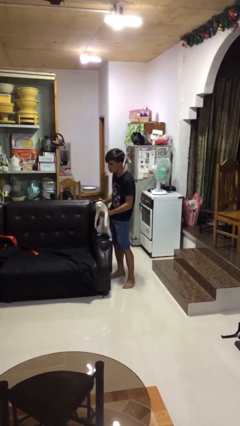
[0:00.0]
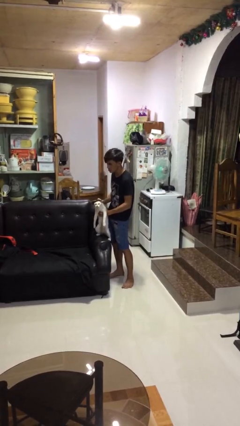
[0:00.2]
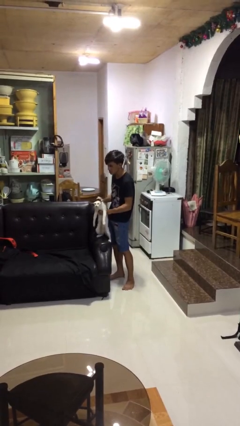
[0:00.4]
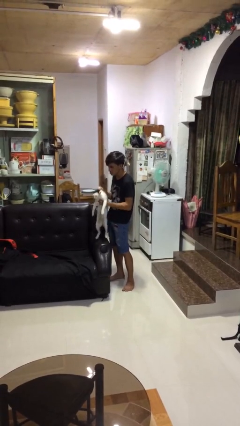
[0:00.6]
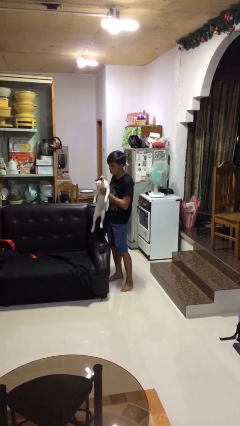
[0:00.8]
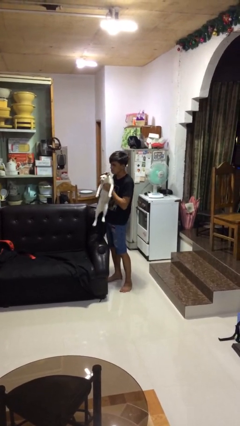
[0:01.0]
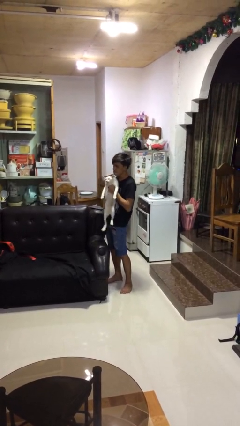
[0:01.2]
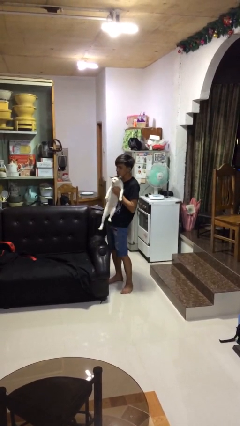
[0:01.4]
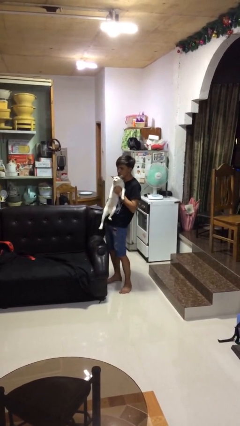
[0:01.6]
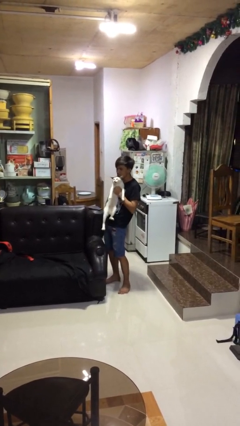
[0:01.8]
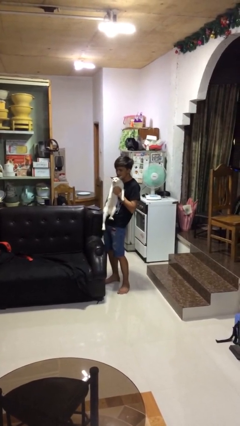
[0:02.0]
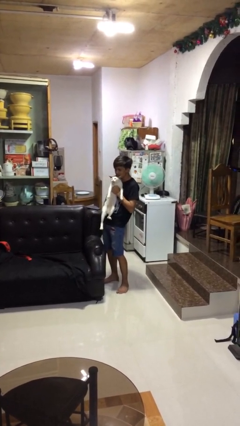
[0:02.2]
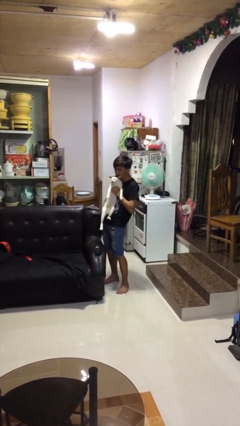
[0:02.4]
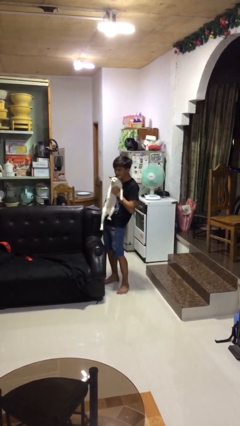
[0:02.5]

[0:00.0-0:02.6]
person hugs cat

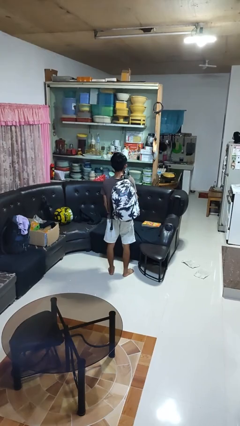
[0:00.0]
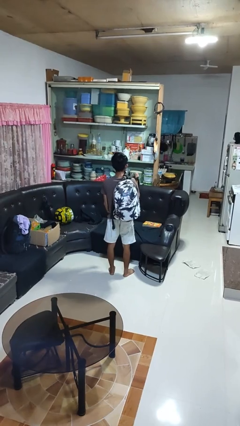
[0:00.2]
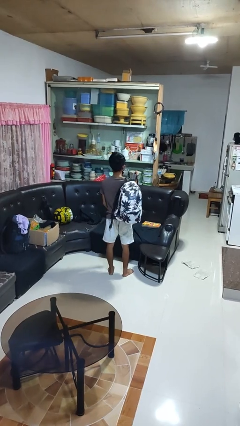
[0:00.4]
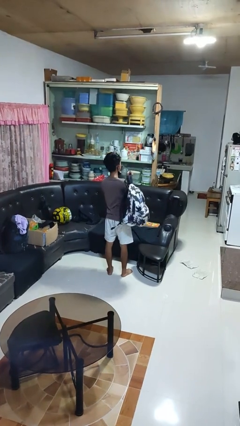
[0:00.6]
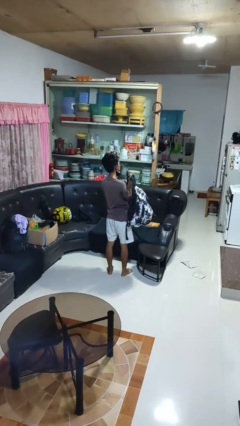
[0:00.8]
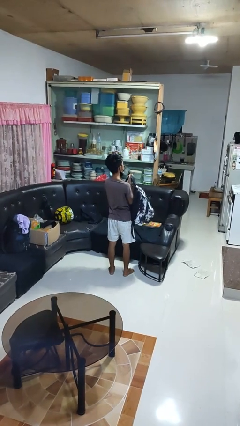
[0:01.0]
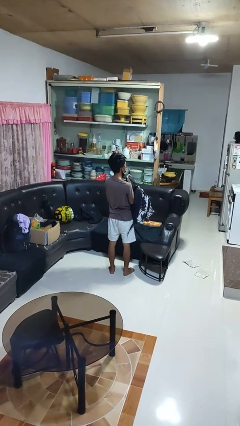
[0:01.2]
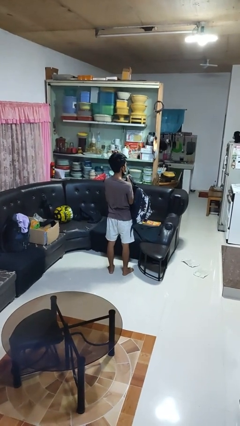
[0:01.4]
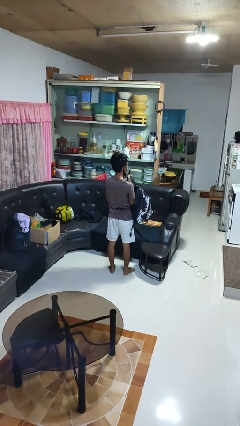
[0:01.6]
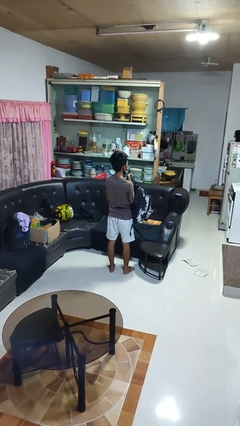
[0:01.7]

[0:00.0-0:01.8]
person takes off backpack

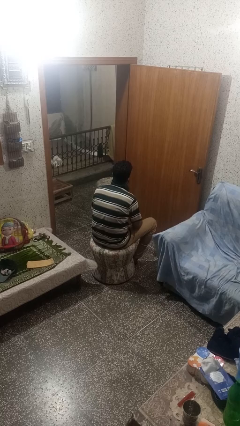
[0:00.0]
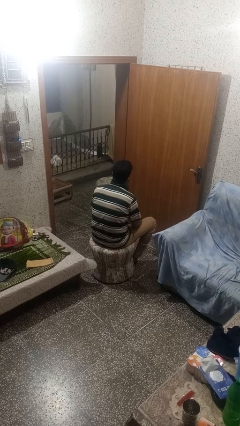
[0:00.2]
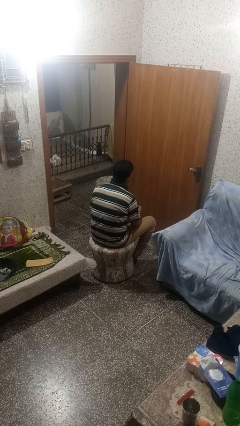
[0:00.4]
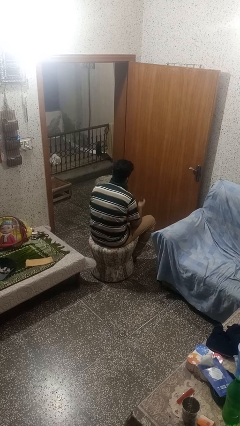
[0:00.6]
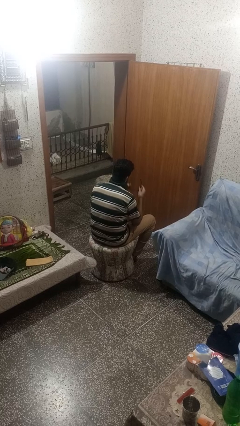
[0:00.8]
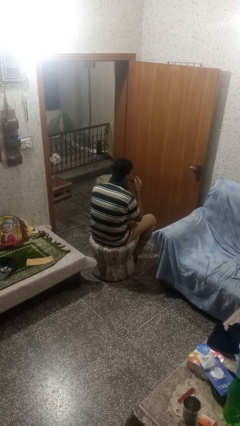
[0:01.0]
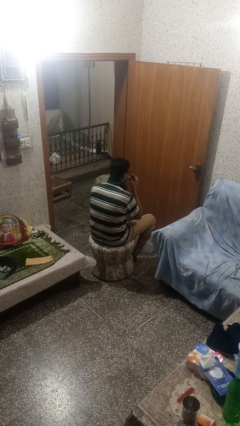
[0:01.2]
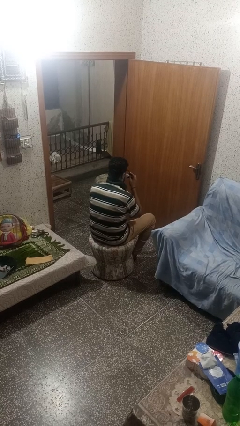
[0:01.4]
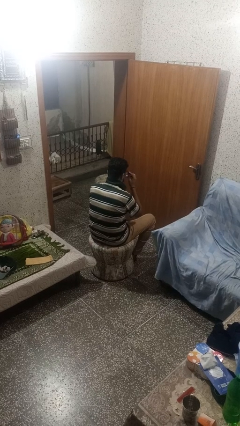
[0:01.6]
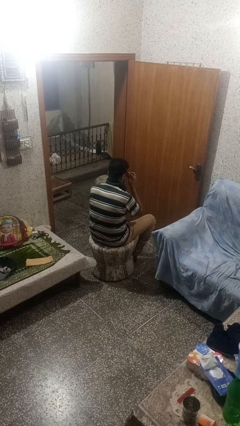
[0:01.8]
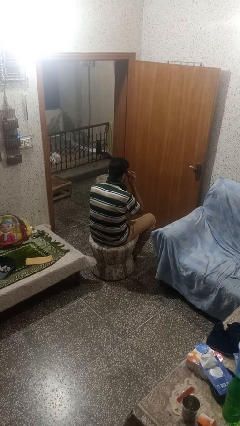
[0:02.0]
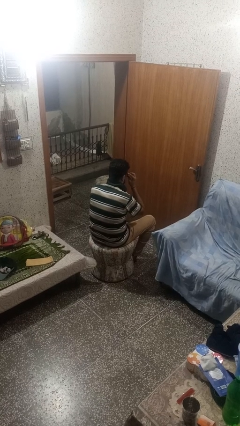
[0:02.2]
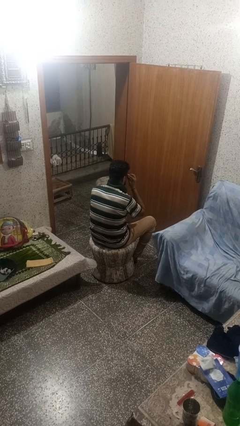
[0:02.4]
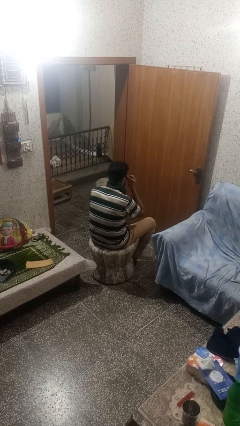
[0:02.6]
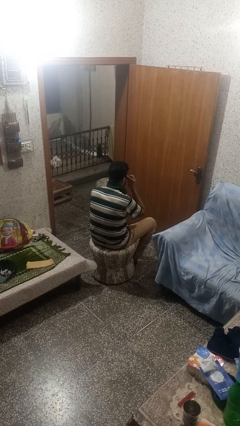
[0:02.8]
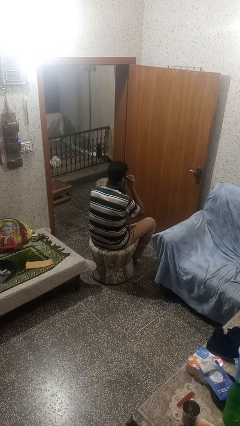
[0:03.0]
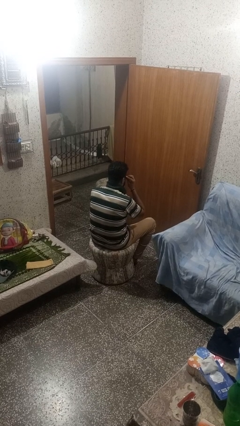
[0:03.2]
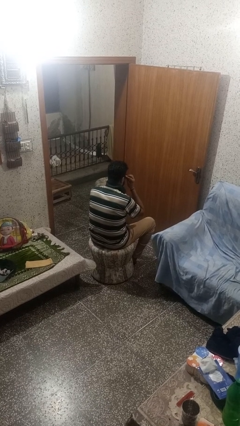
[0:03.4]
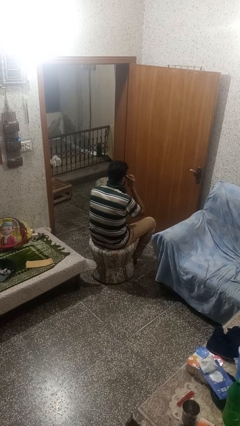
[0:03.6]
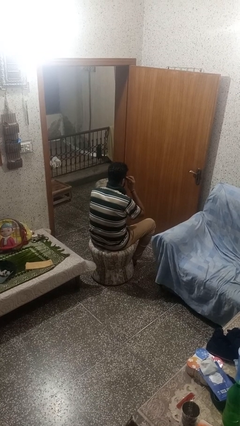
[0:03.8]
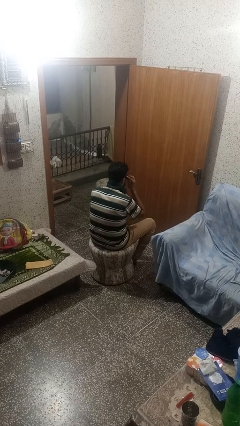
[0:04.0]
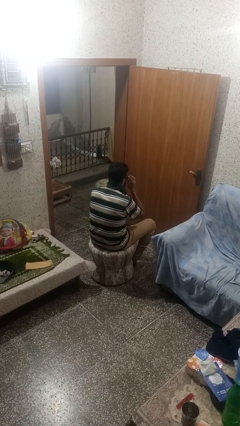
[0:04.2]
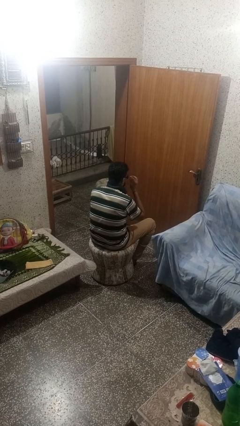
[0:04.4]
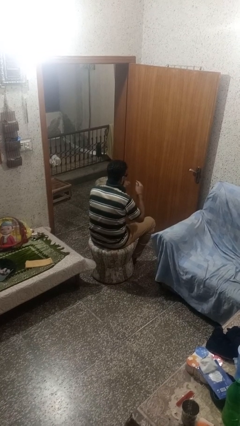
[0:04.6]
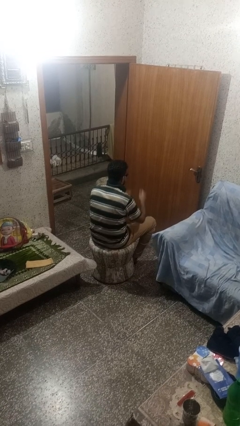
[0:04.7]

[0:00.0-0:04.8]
person puts on glasses

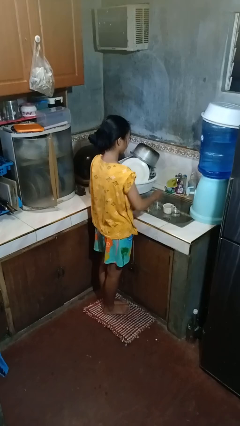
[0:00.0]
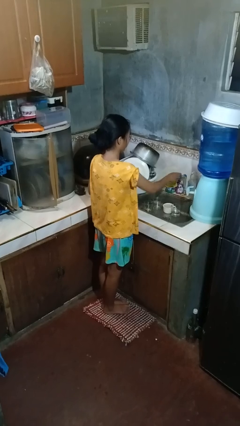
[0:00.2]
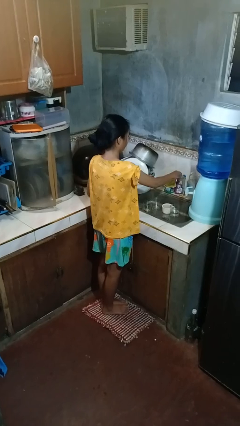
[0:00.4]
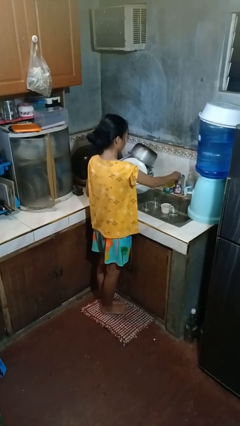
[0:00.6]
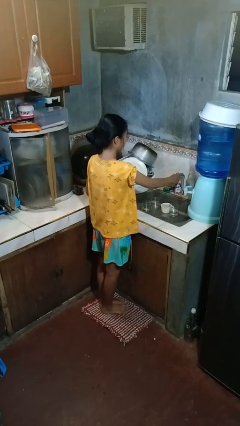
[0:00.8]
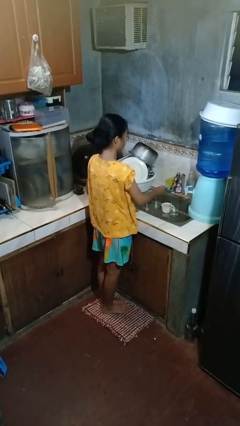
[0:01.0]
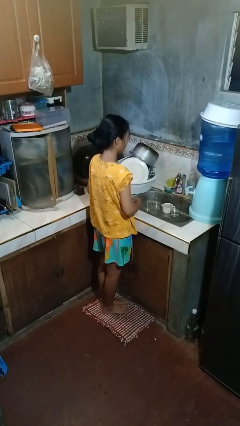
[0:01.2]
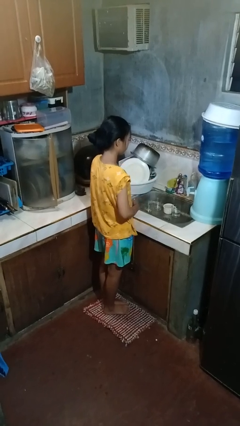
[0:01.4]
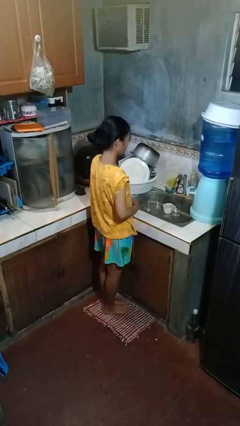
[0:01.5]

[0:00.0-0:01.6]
person turns on faucet

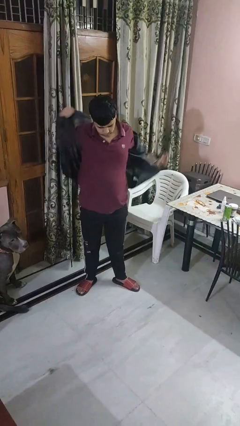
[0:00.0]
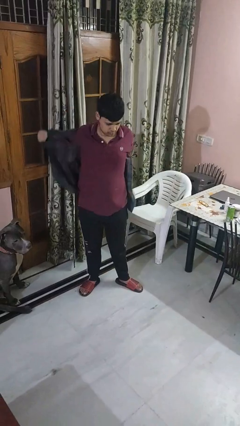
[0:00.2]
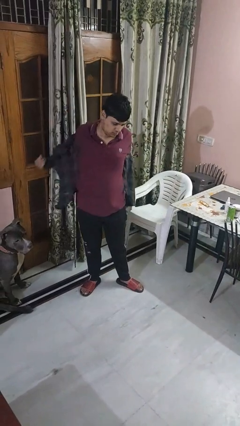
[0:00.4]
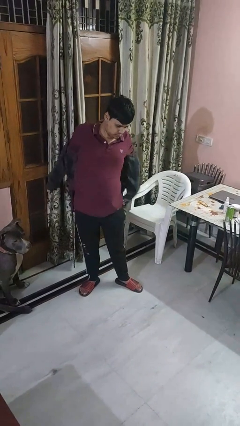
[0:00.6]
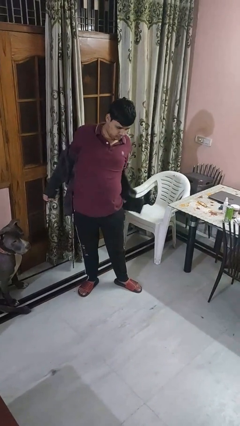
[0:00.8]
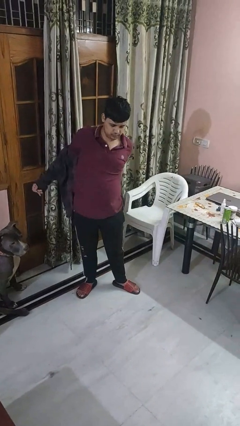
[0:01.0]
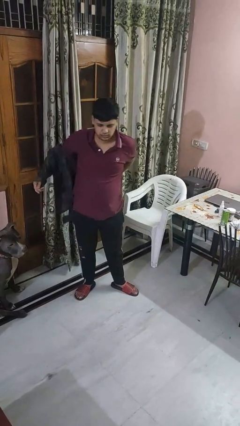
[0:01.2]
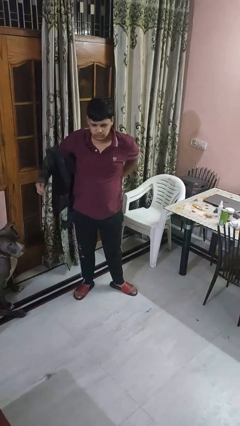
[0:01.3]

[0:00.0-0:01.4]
person takes off shirt

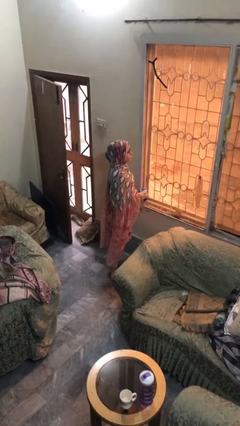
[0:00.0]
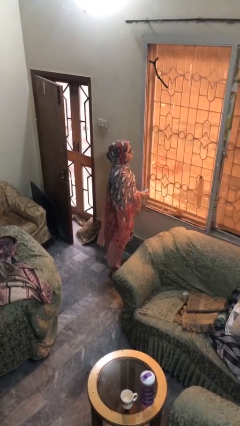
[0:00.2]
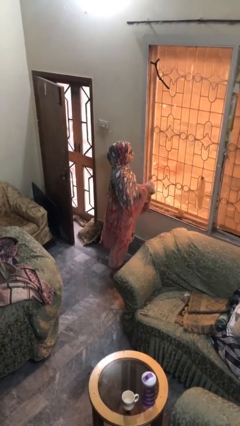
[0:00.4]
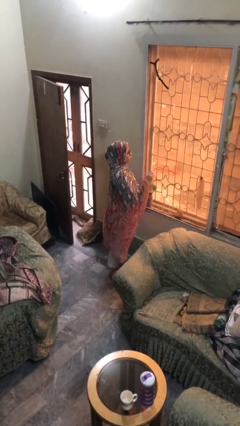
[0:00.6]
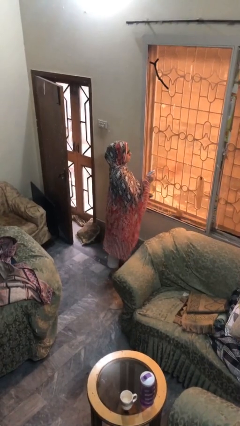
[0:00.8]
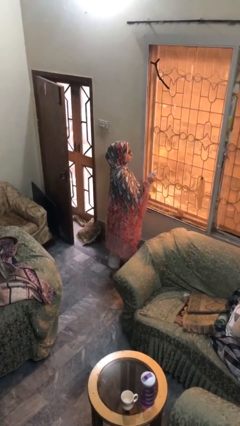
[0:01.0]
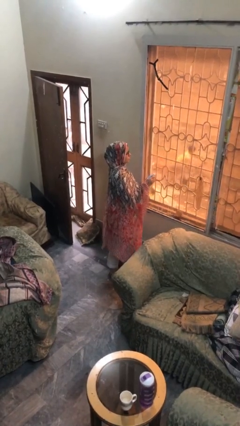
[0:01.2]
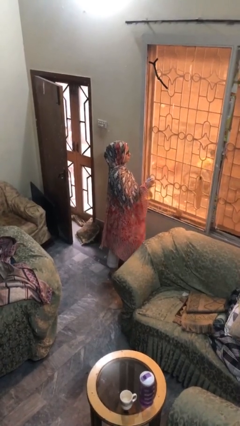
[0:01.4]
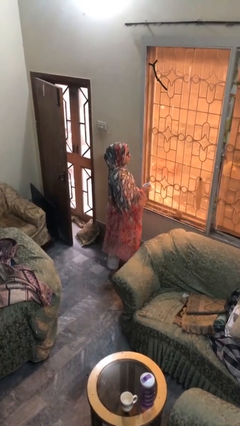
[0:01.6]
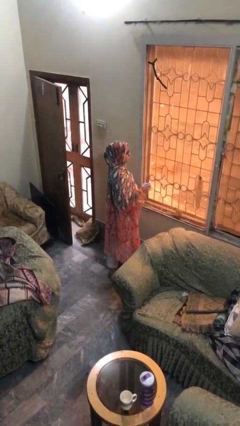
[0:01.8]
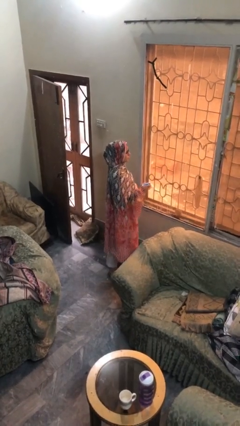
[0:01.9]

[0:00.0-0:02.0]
person sprays from bottle

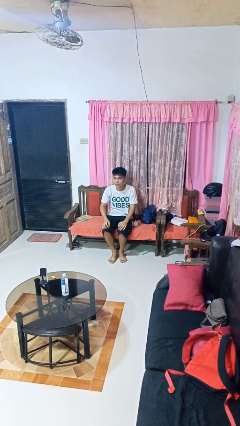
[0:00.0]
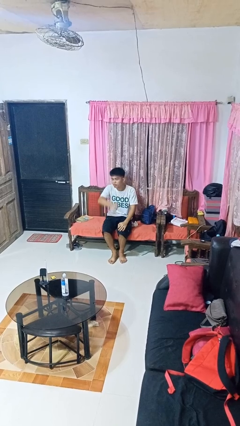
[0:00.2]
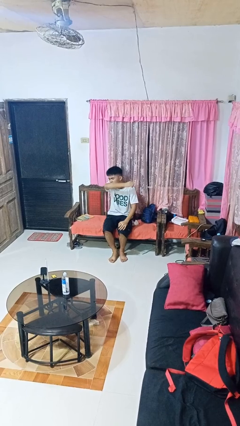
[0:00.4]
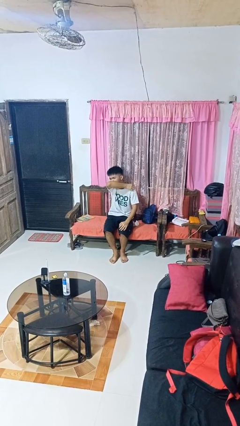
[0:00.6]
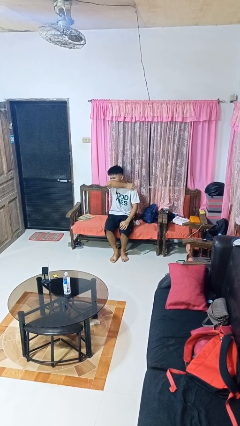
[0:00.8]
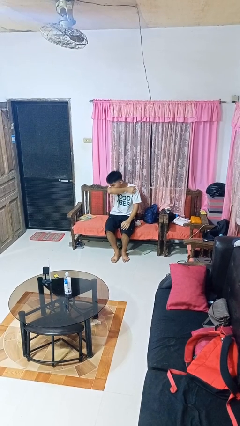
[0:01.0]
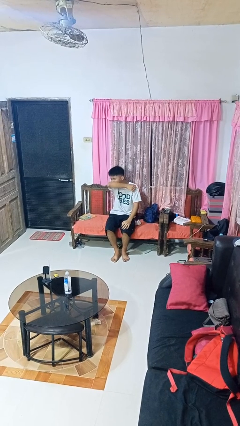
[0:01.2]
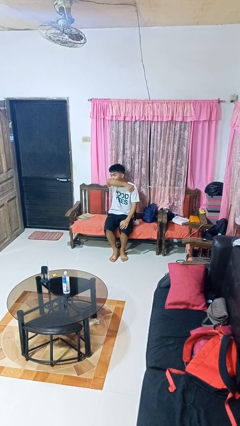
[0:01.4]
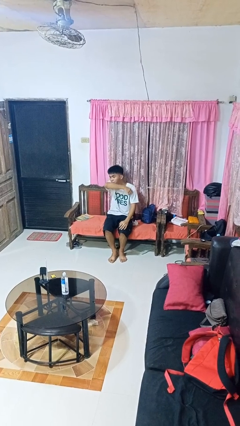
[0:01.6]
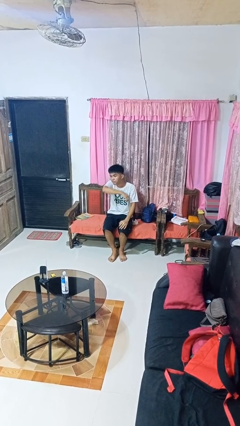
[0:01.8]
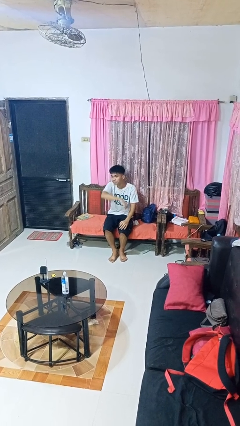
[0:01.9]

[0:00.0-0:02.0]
person sneezes into arm

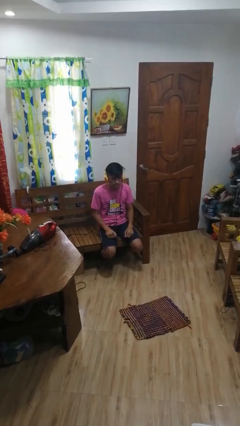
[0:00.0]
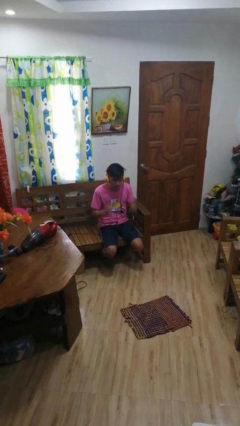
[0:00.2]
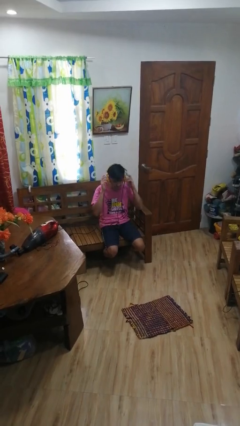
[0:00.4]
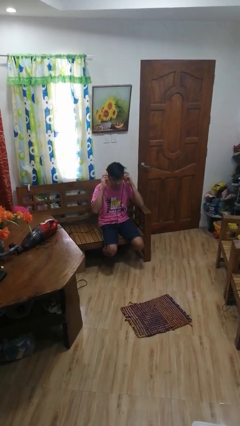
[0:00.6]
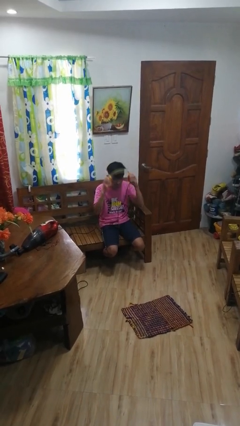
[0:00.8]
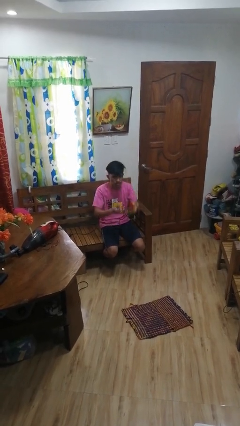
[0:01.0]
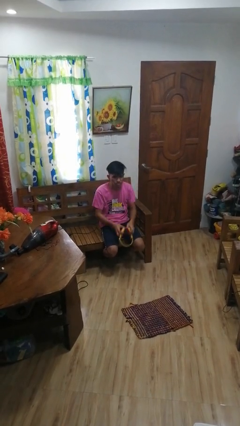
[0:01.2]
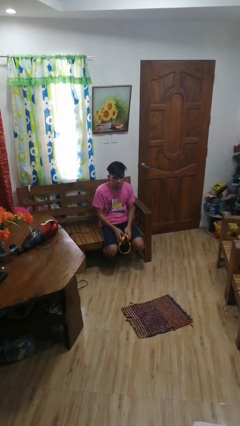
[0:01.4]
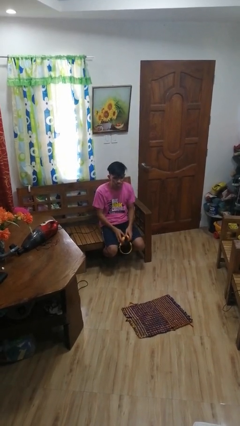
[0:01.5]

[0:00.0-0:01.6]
person takes off headphones
